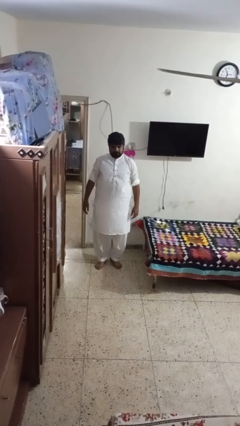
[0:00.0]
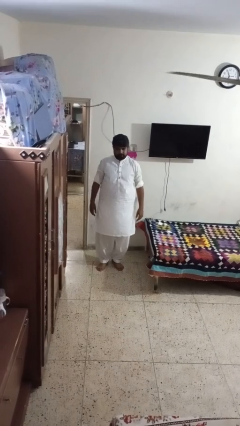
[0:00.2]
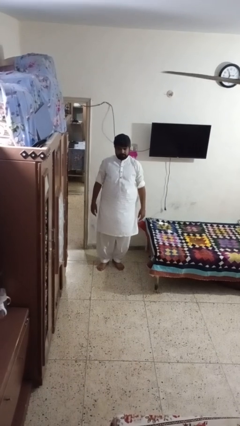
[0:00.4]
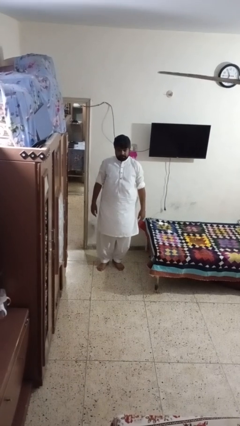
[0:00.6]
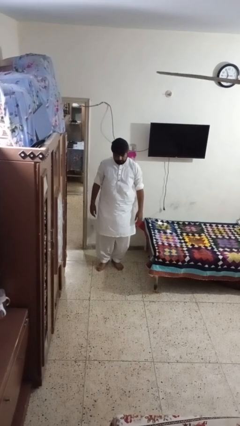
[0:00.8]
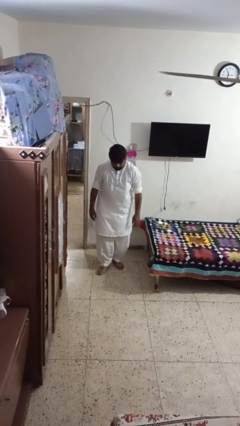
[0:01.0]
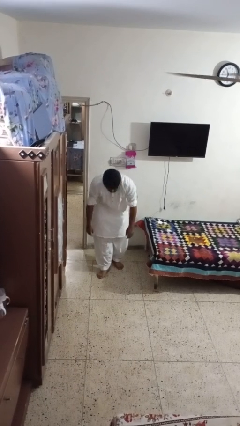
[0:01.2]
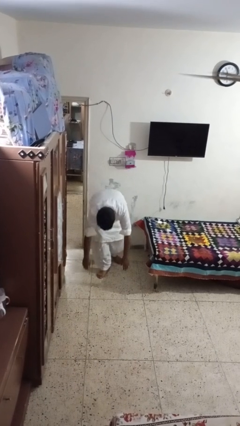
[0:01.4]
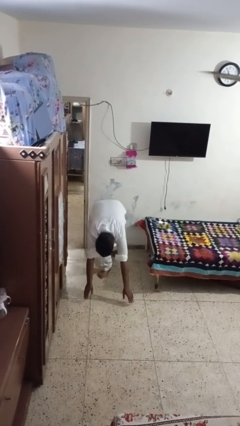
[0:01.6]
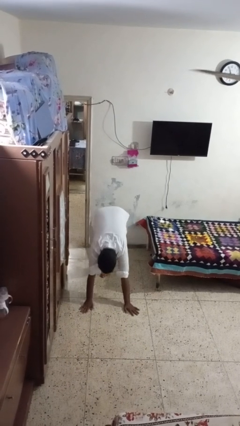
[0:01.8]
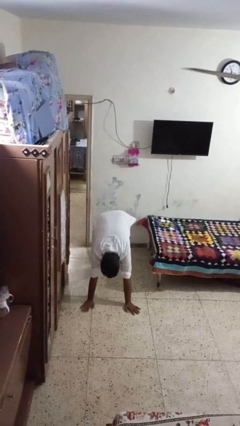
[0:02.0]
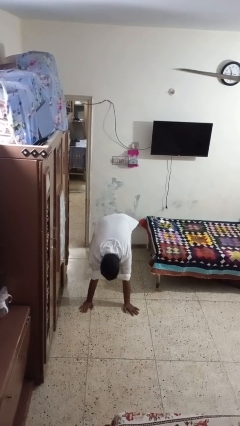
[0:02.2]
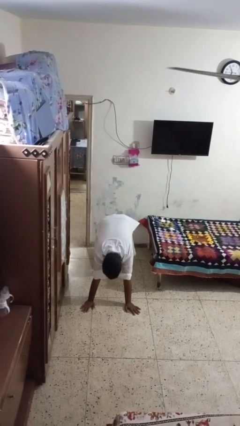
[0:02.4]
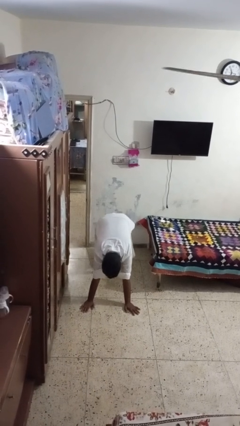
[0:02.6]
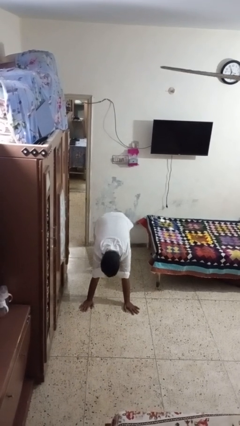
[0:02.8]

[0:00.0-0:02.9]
person exercises with plank

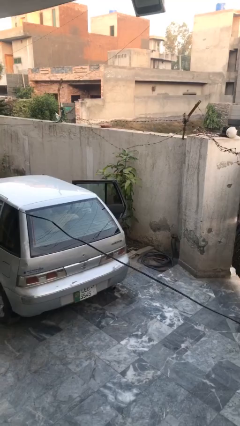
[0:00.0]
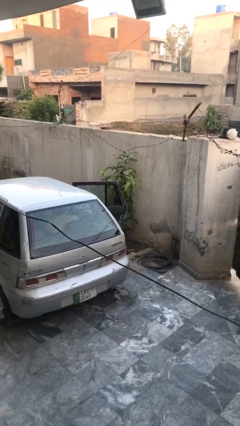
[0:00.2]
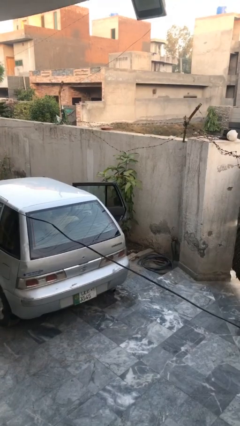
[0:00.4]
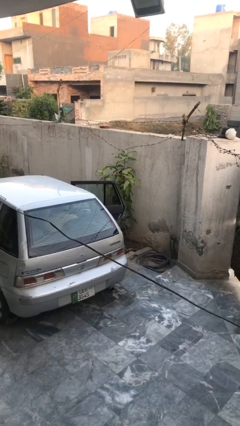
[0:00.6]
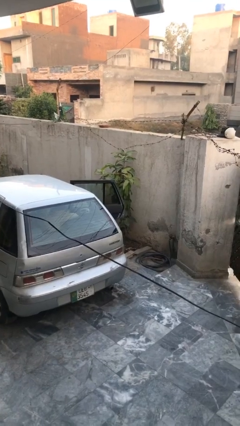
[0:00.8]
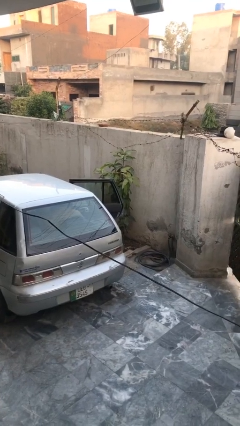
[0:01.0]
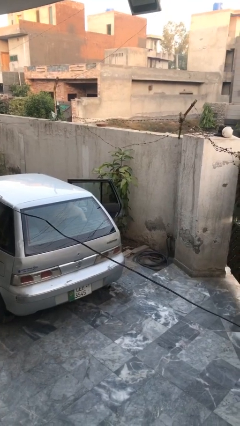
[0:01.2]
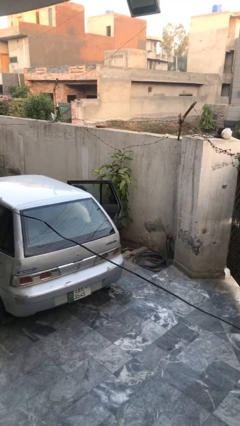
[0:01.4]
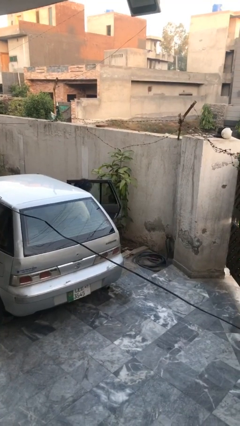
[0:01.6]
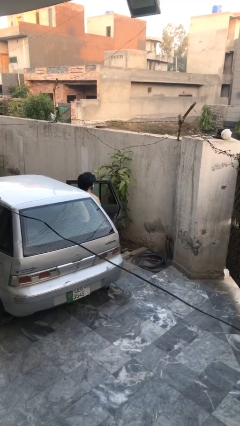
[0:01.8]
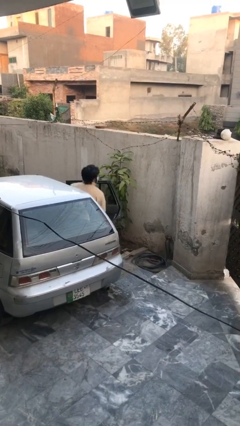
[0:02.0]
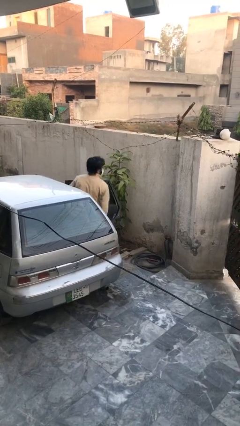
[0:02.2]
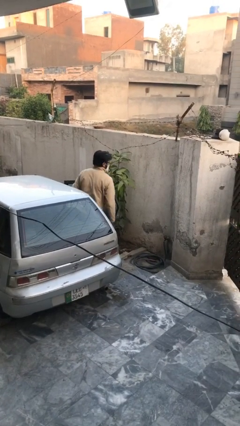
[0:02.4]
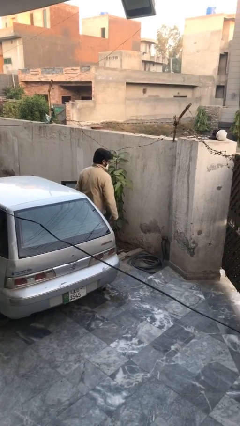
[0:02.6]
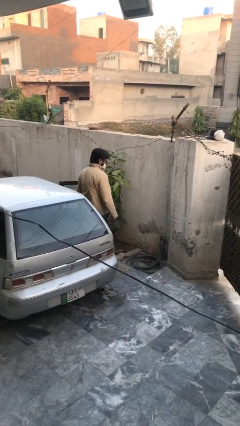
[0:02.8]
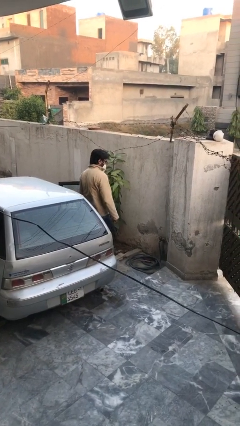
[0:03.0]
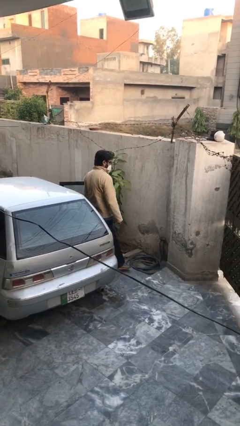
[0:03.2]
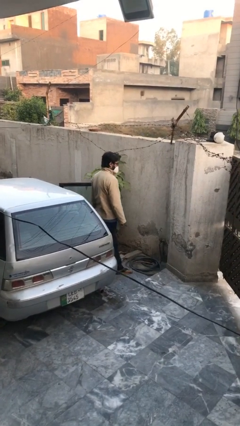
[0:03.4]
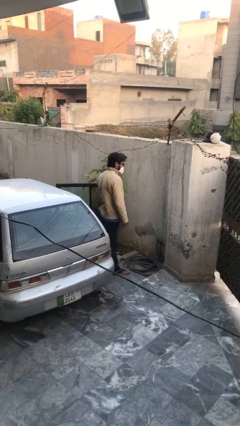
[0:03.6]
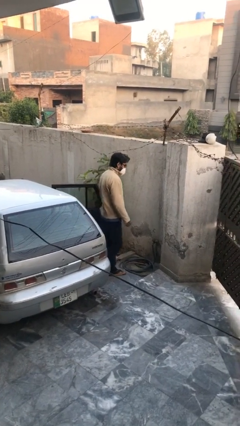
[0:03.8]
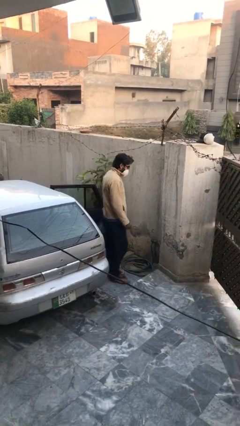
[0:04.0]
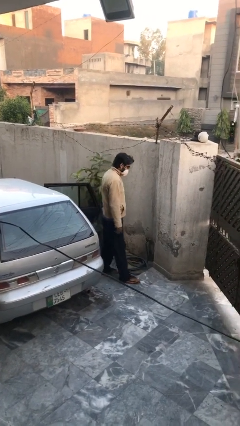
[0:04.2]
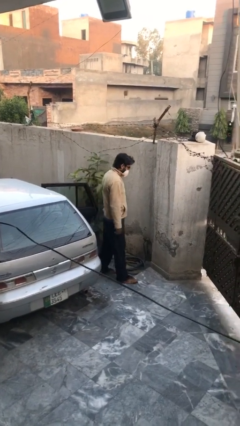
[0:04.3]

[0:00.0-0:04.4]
person exits car

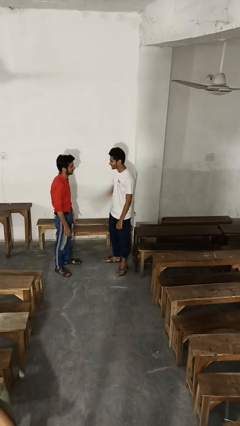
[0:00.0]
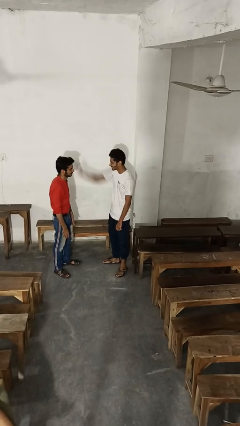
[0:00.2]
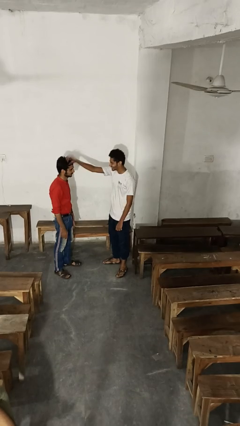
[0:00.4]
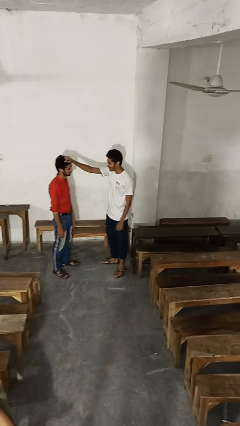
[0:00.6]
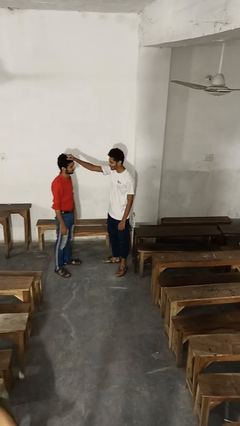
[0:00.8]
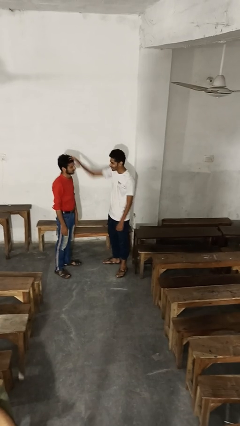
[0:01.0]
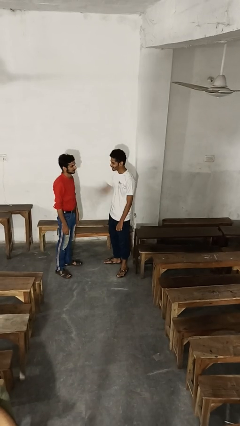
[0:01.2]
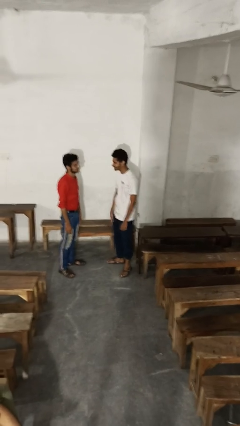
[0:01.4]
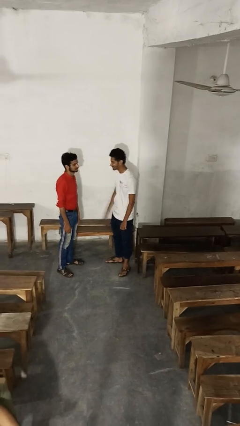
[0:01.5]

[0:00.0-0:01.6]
person grabs person by hair

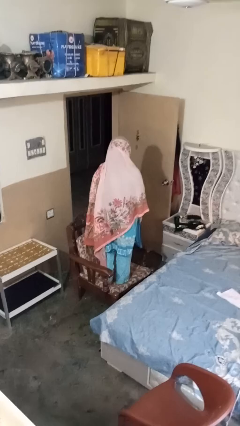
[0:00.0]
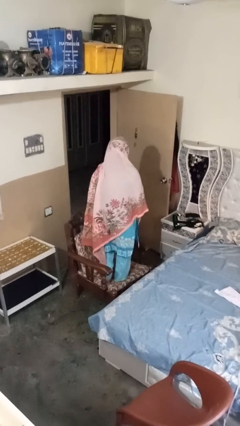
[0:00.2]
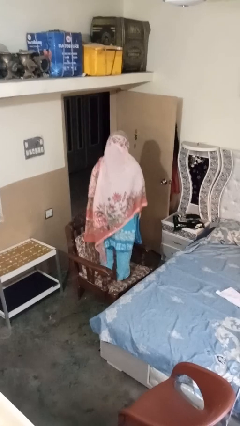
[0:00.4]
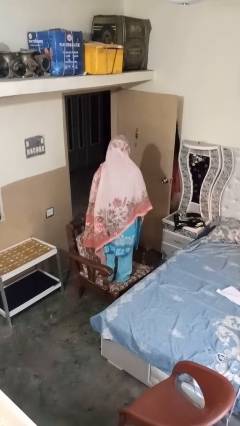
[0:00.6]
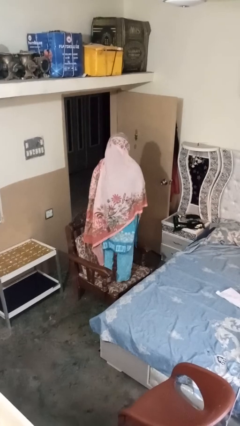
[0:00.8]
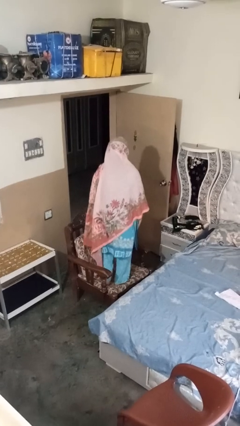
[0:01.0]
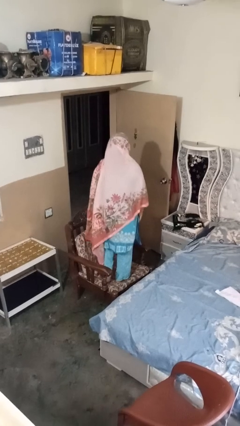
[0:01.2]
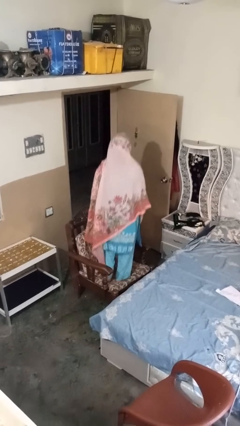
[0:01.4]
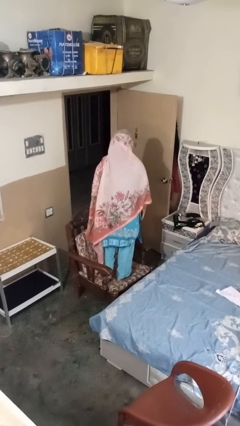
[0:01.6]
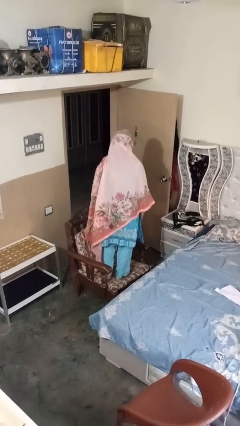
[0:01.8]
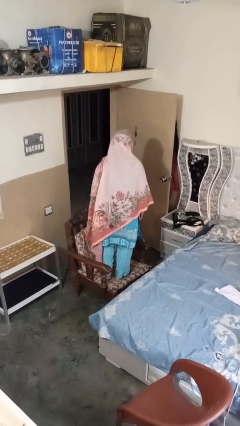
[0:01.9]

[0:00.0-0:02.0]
person jumps on couch

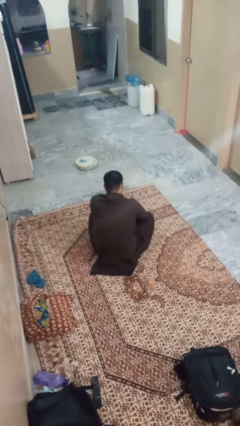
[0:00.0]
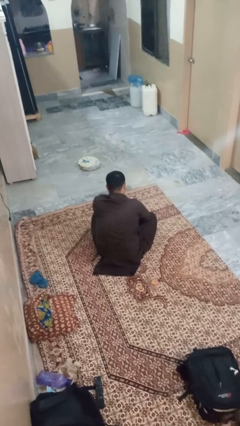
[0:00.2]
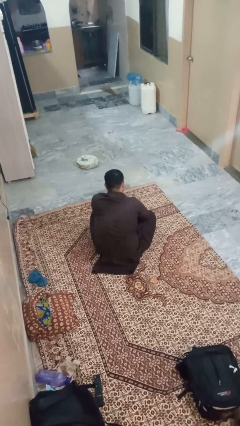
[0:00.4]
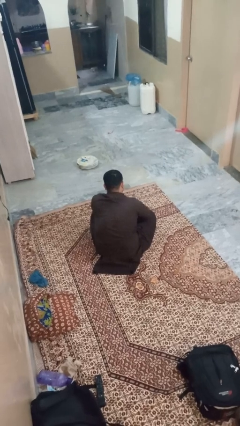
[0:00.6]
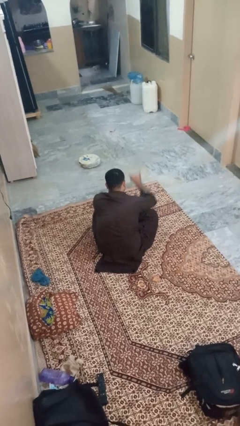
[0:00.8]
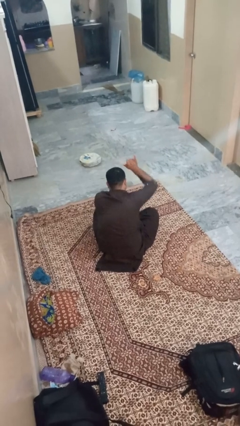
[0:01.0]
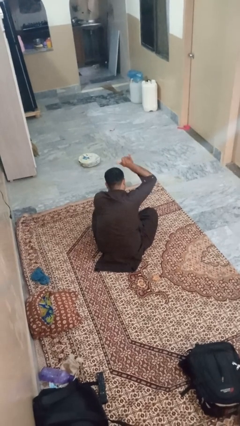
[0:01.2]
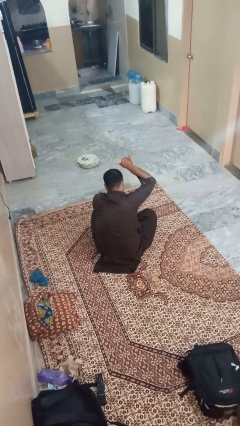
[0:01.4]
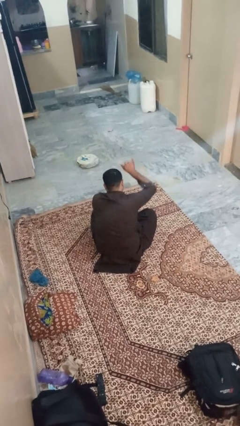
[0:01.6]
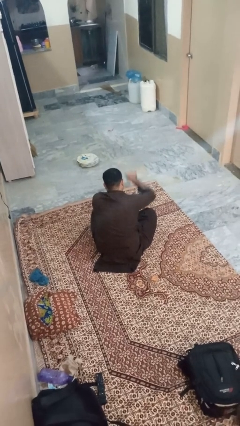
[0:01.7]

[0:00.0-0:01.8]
person gestures hang loose

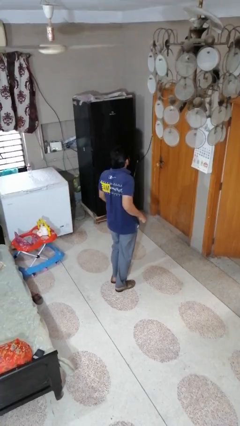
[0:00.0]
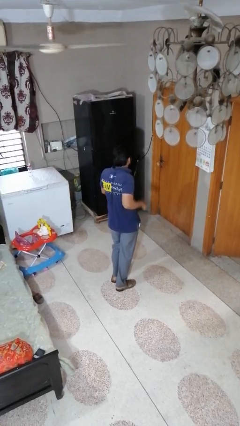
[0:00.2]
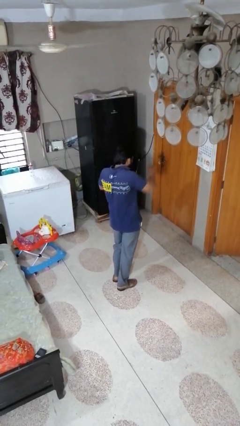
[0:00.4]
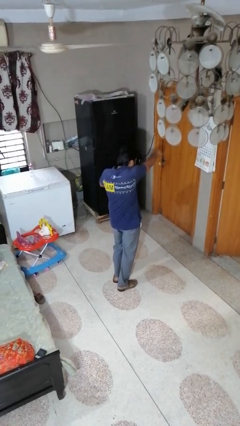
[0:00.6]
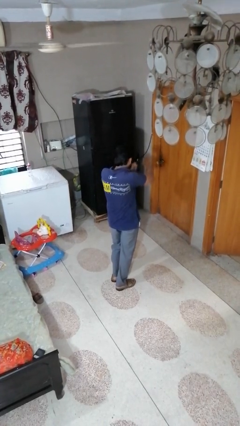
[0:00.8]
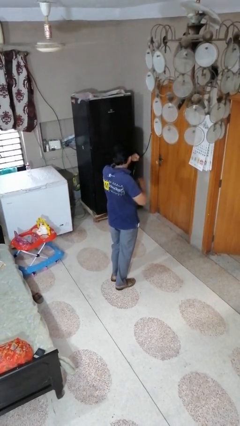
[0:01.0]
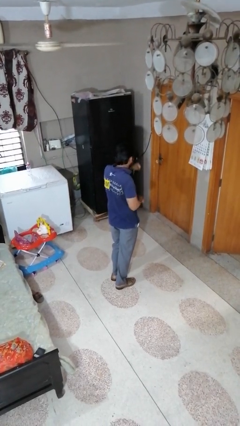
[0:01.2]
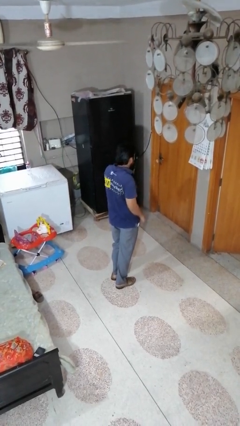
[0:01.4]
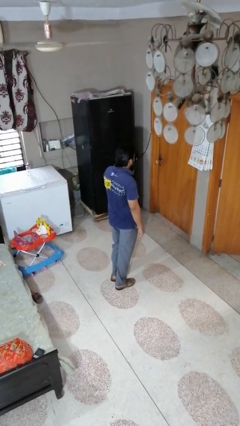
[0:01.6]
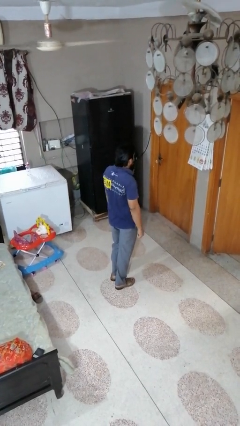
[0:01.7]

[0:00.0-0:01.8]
person karate chop

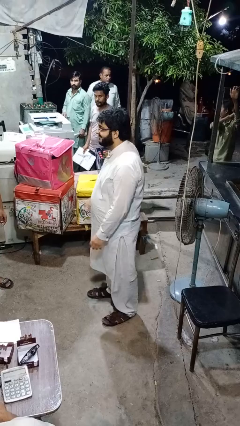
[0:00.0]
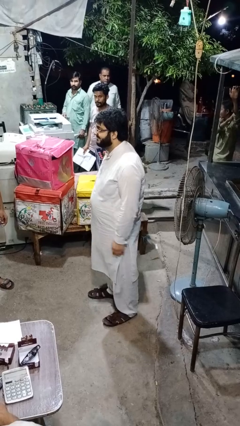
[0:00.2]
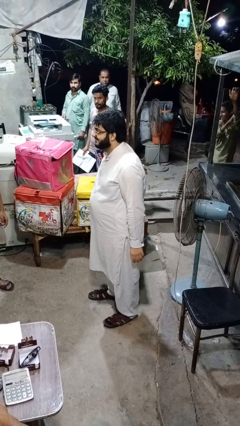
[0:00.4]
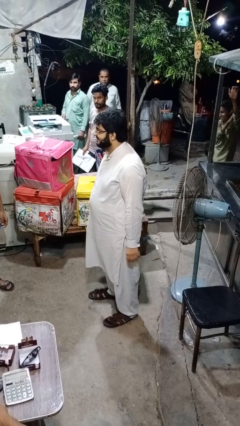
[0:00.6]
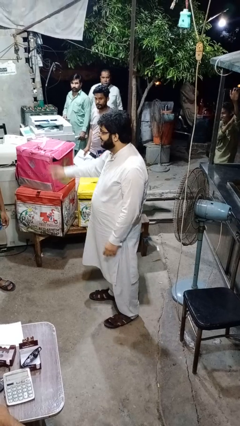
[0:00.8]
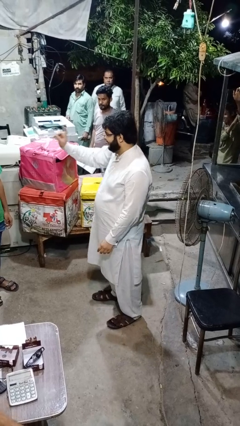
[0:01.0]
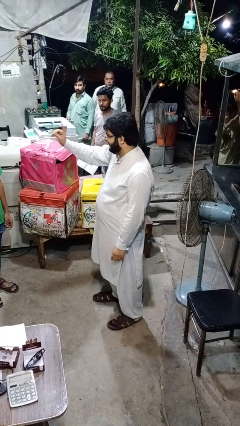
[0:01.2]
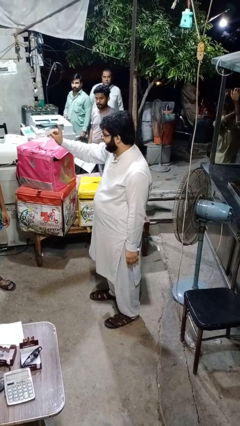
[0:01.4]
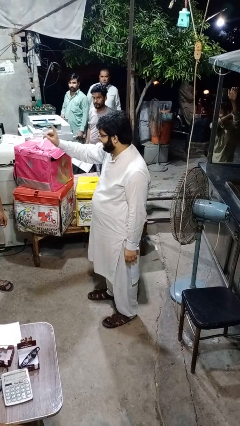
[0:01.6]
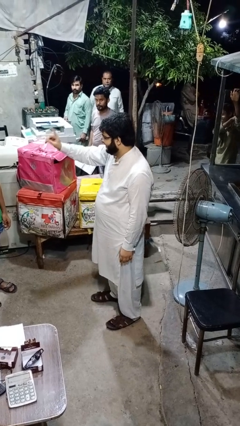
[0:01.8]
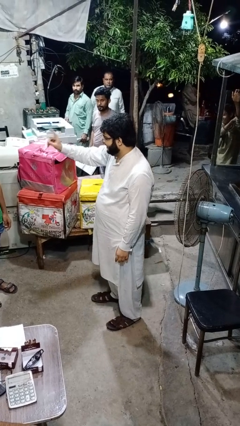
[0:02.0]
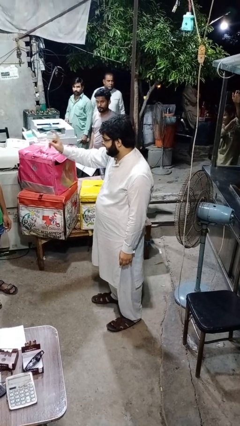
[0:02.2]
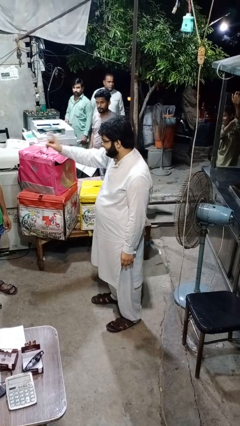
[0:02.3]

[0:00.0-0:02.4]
person points at person

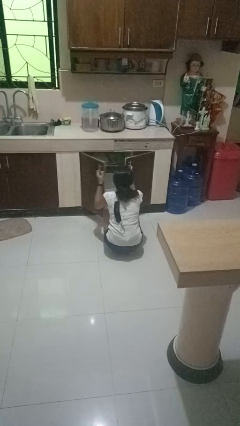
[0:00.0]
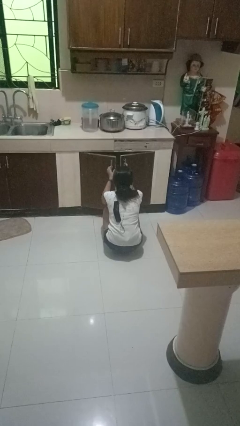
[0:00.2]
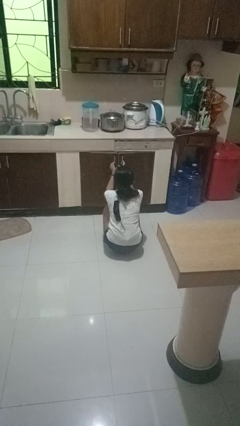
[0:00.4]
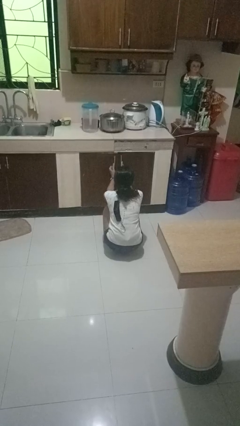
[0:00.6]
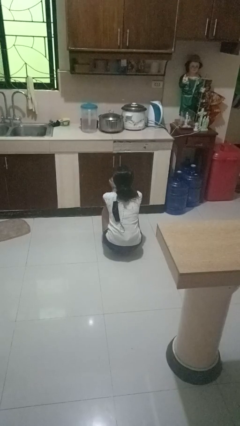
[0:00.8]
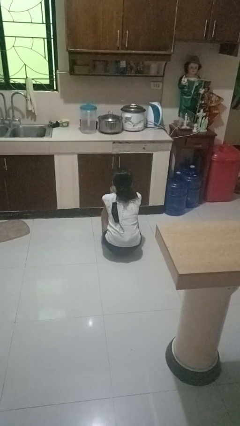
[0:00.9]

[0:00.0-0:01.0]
person closes dishwasher
